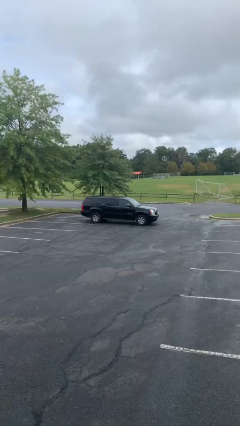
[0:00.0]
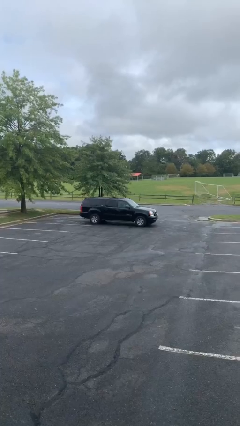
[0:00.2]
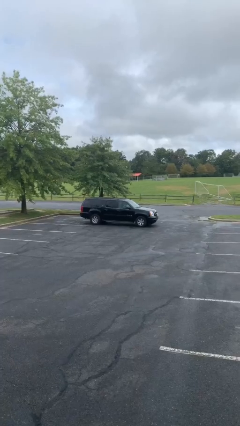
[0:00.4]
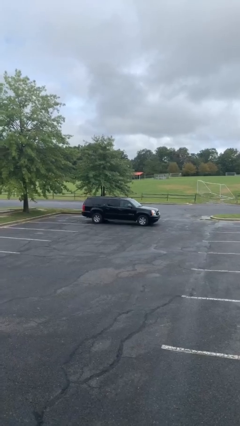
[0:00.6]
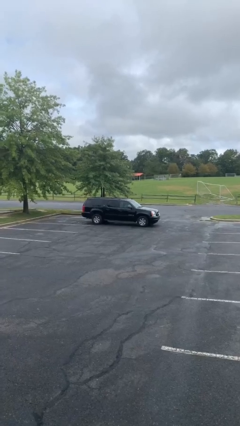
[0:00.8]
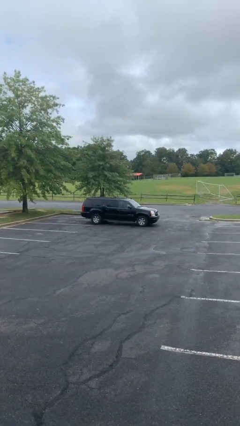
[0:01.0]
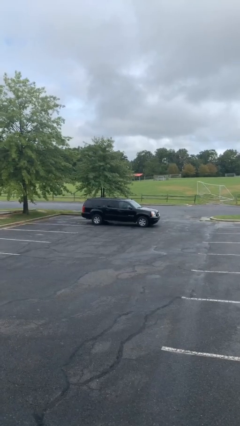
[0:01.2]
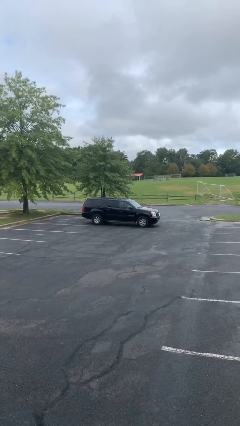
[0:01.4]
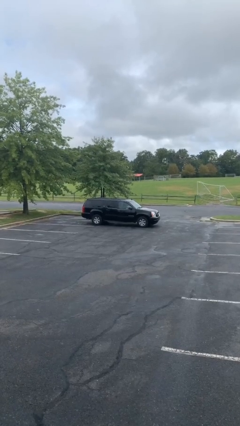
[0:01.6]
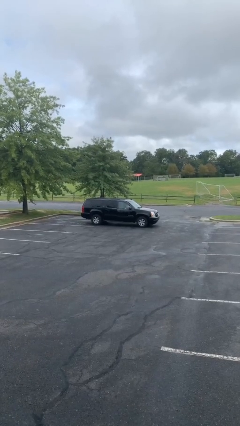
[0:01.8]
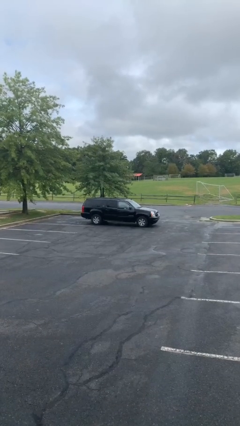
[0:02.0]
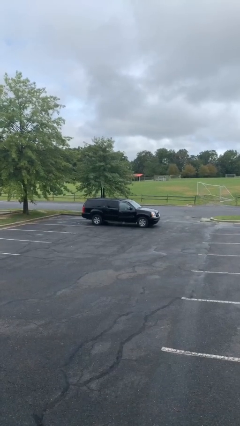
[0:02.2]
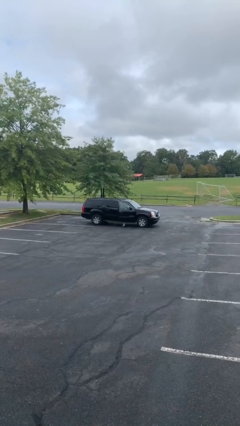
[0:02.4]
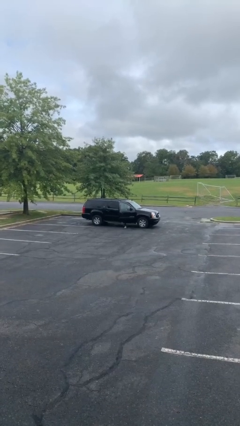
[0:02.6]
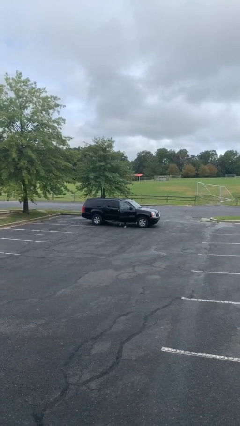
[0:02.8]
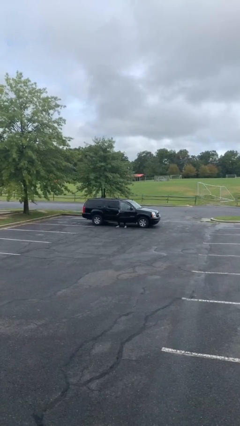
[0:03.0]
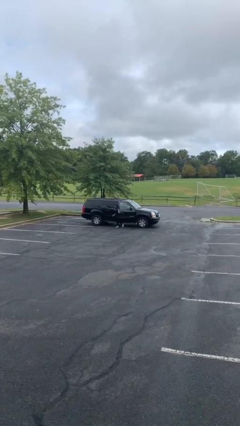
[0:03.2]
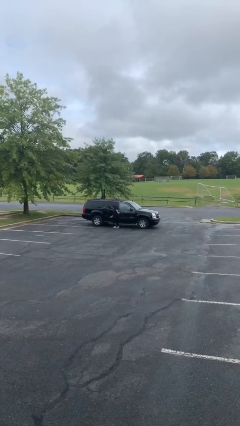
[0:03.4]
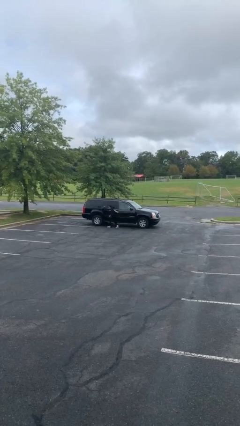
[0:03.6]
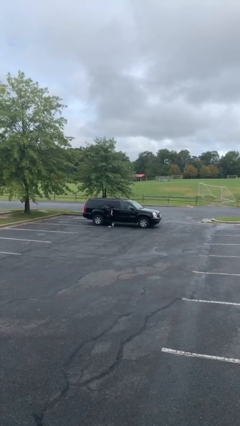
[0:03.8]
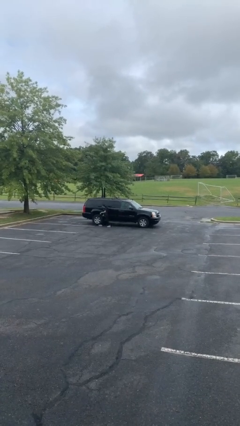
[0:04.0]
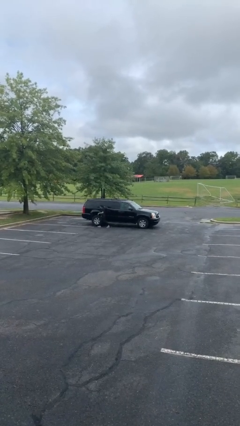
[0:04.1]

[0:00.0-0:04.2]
car drops off person

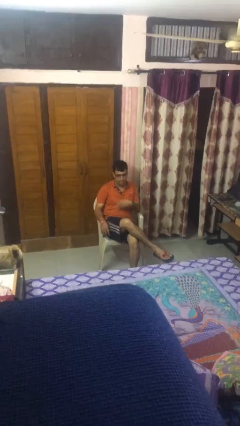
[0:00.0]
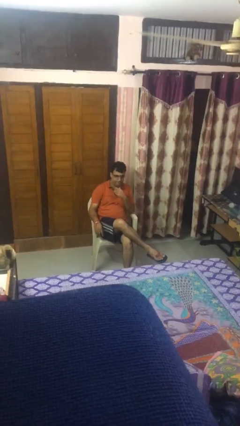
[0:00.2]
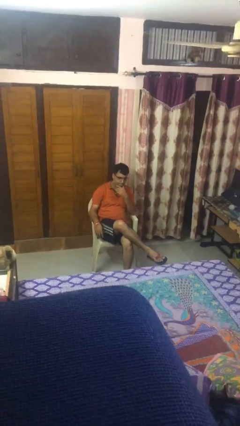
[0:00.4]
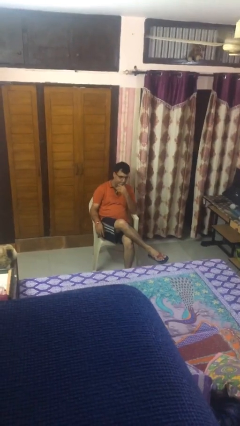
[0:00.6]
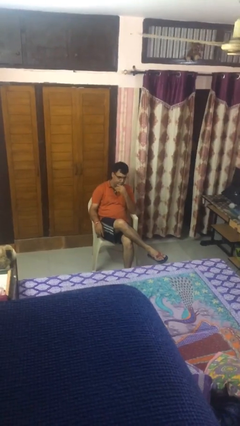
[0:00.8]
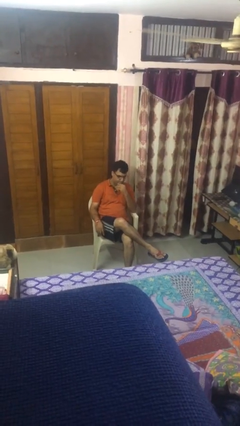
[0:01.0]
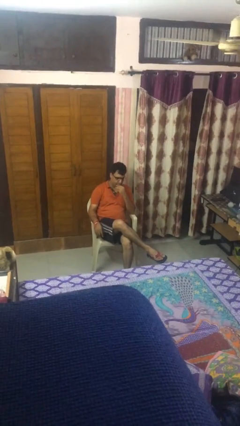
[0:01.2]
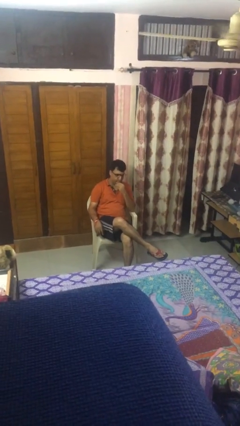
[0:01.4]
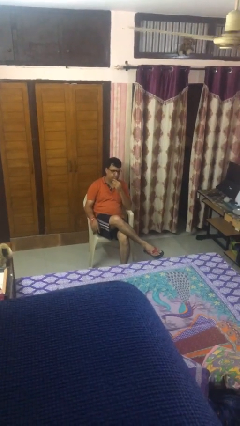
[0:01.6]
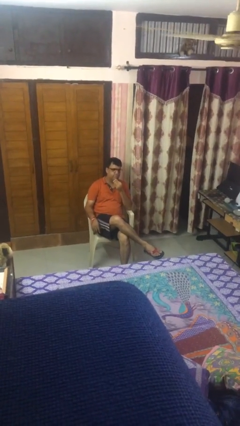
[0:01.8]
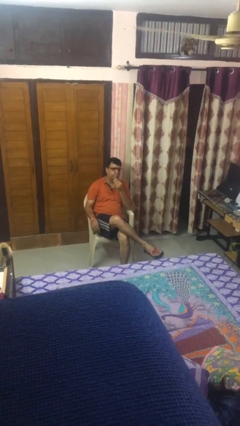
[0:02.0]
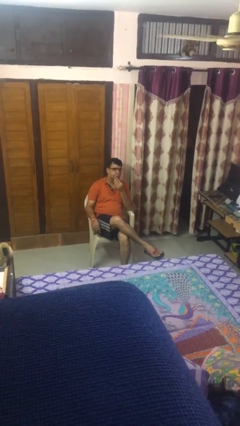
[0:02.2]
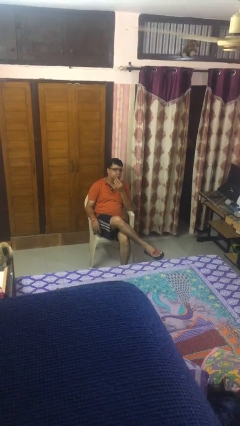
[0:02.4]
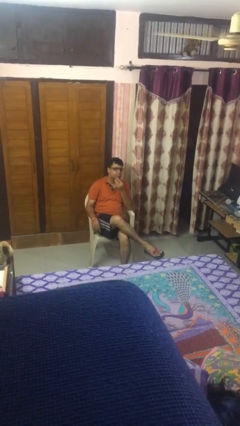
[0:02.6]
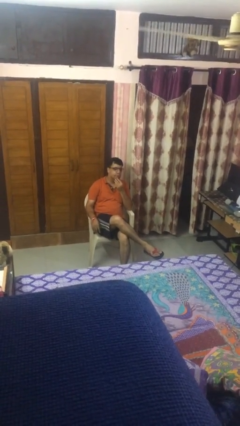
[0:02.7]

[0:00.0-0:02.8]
person strokes chin

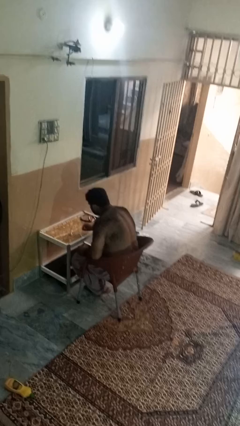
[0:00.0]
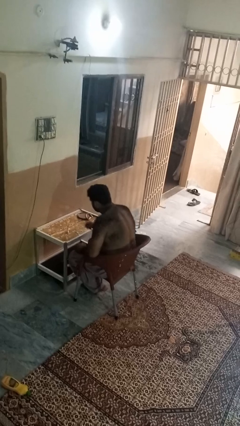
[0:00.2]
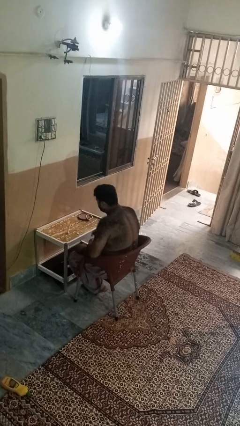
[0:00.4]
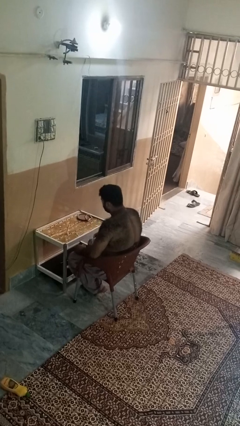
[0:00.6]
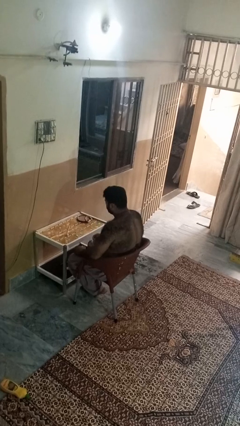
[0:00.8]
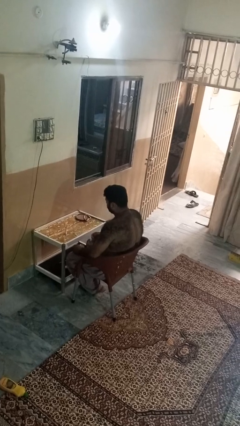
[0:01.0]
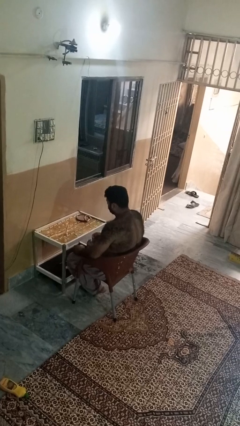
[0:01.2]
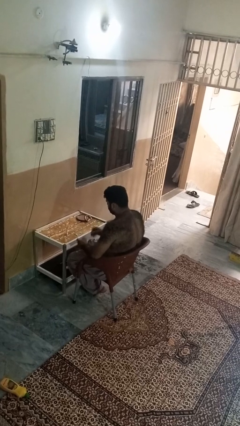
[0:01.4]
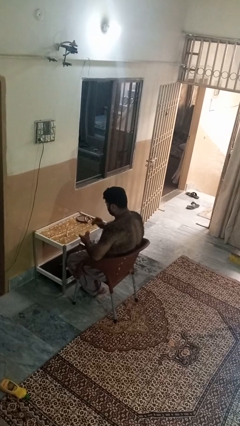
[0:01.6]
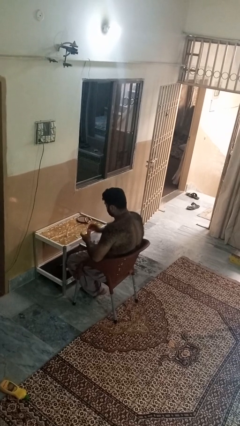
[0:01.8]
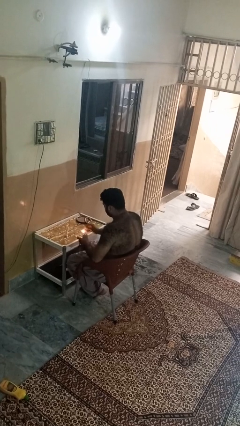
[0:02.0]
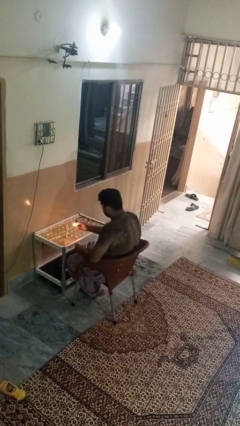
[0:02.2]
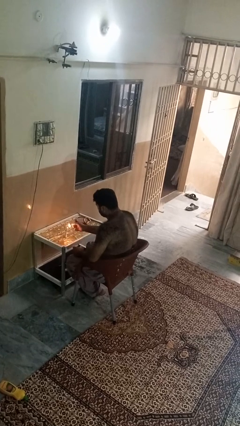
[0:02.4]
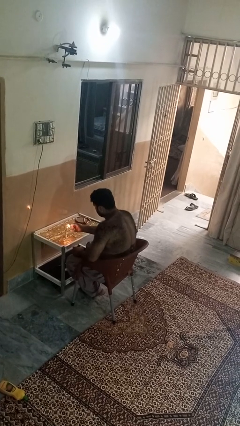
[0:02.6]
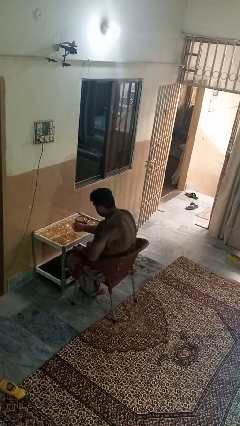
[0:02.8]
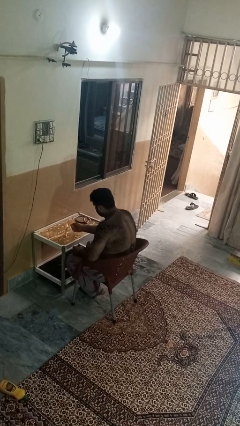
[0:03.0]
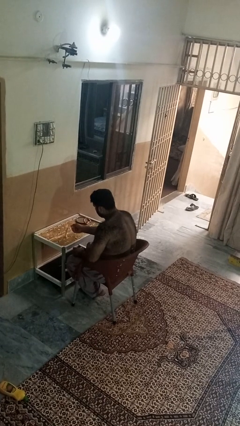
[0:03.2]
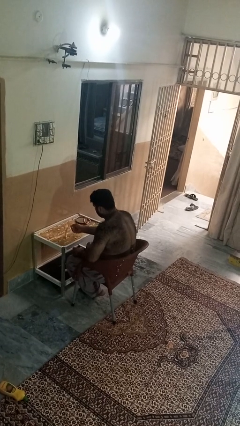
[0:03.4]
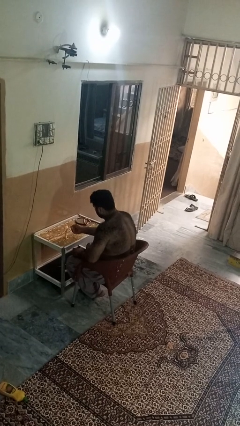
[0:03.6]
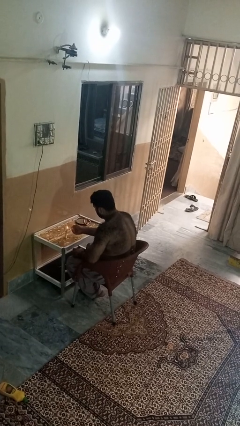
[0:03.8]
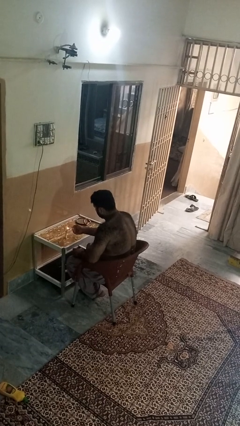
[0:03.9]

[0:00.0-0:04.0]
person shakes head

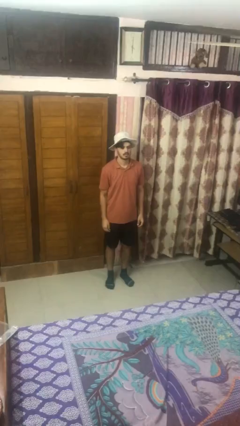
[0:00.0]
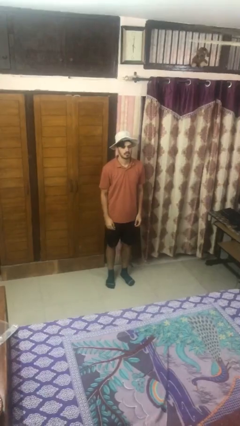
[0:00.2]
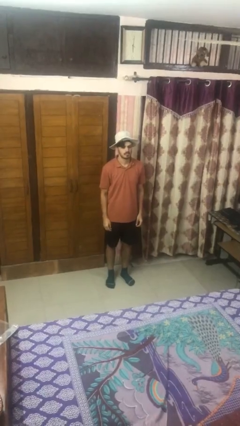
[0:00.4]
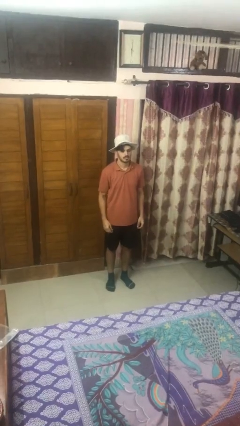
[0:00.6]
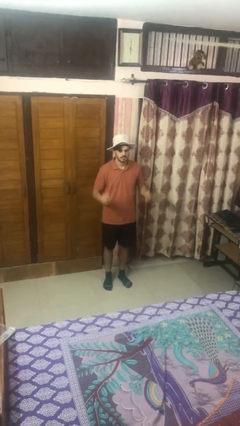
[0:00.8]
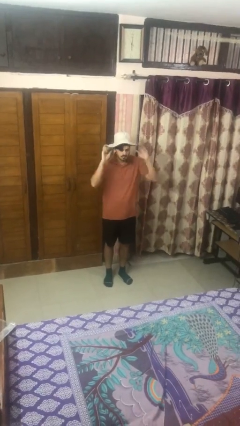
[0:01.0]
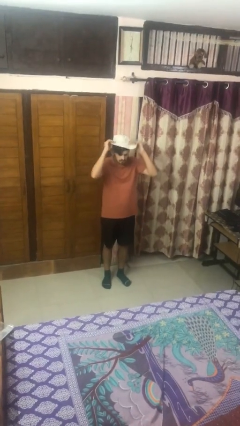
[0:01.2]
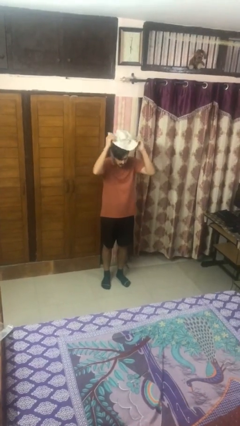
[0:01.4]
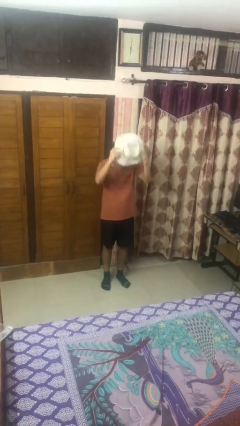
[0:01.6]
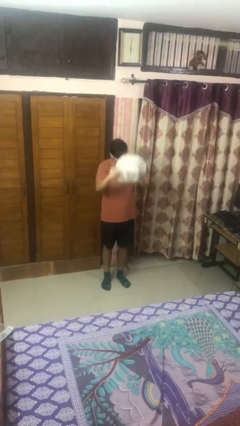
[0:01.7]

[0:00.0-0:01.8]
person takes off hat

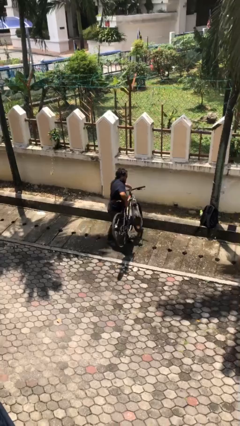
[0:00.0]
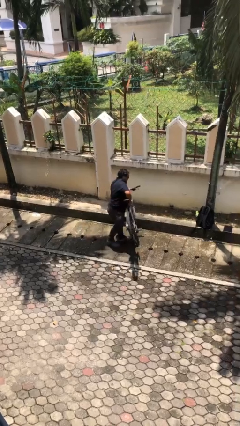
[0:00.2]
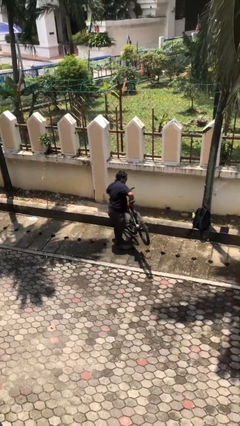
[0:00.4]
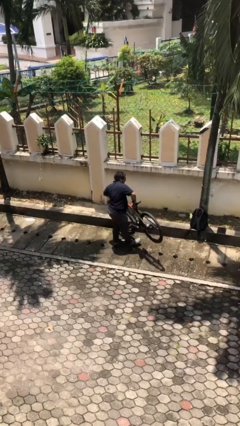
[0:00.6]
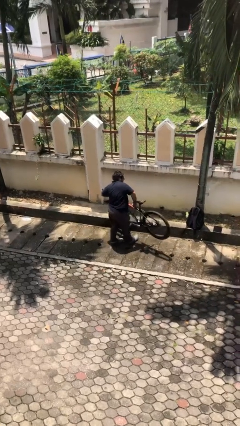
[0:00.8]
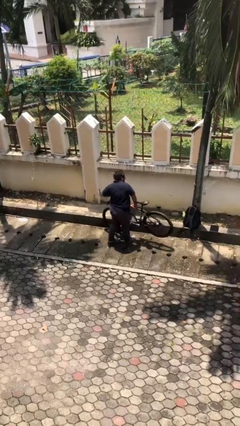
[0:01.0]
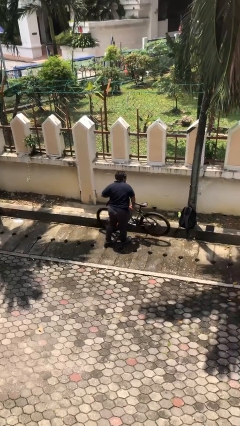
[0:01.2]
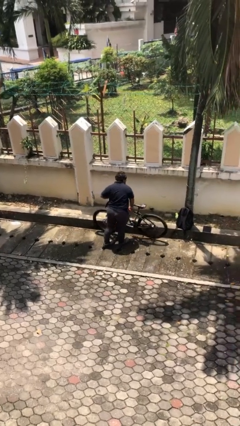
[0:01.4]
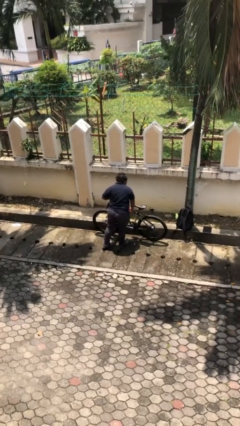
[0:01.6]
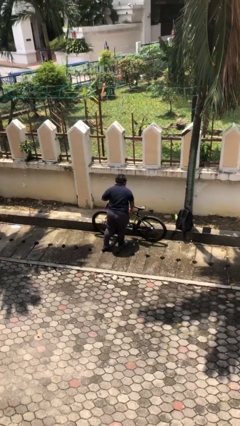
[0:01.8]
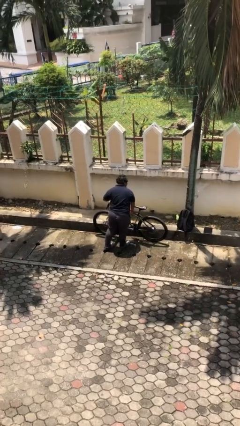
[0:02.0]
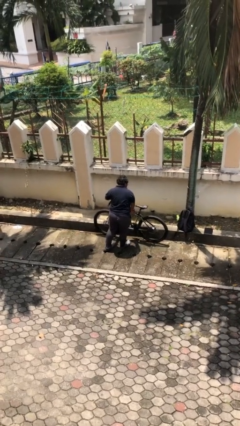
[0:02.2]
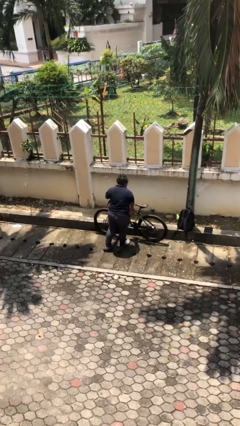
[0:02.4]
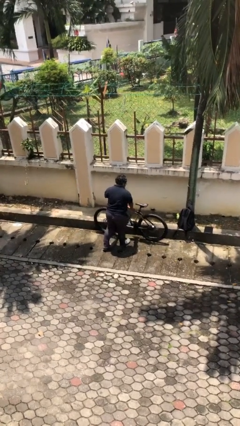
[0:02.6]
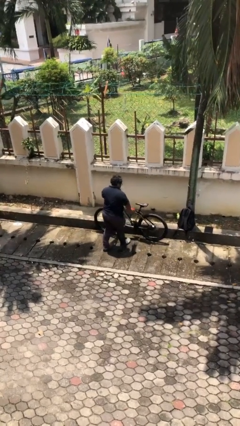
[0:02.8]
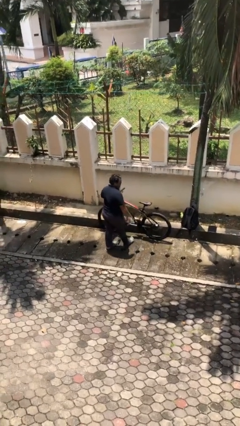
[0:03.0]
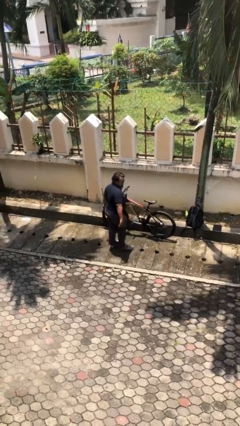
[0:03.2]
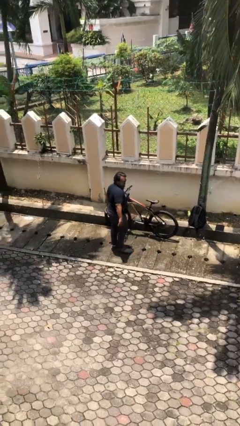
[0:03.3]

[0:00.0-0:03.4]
person puts down object on floor

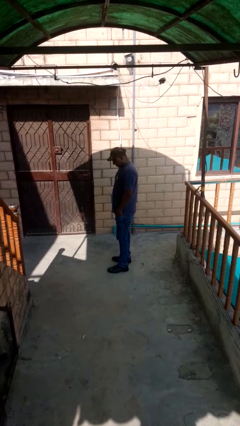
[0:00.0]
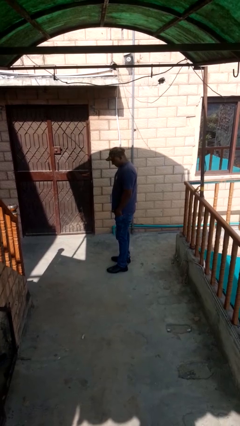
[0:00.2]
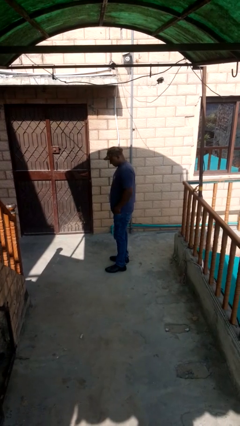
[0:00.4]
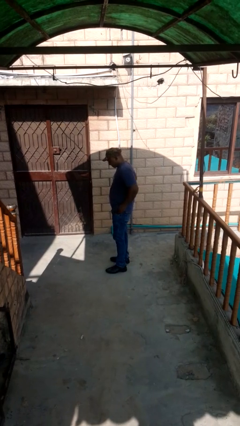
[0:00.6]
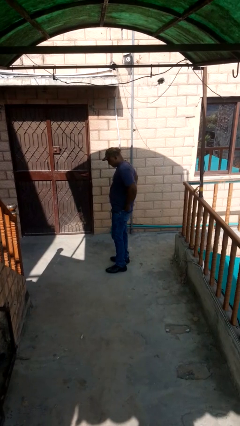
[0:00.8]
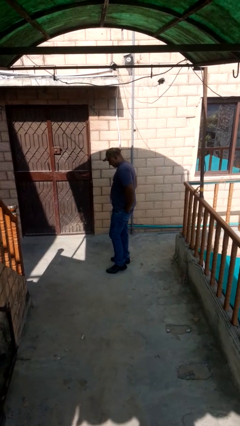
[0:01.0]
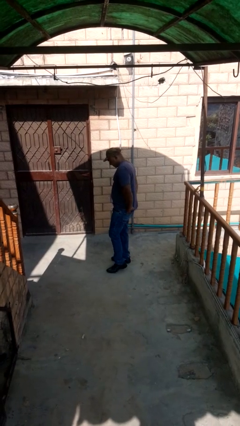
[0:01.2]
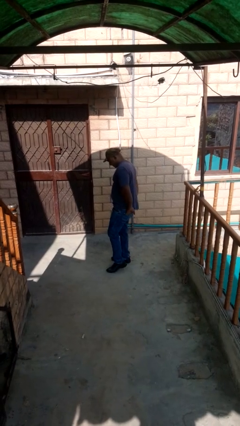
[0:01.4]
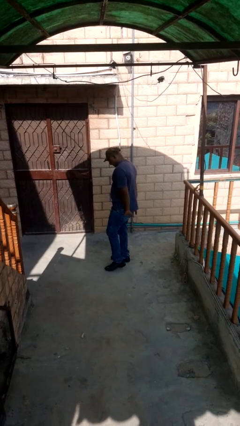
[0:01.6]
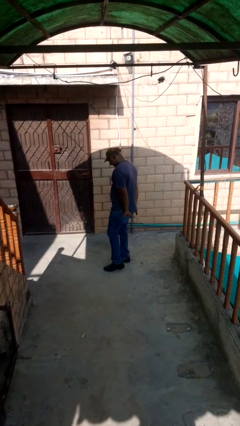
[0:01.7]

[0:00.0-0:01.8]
person puts hands in back pockets
